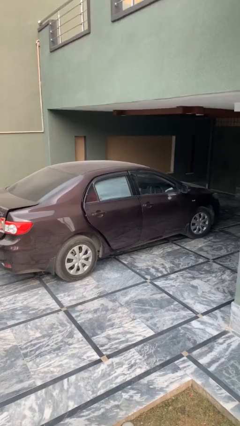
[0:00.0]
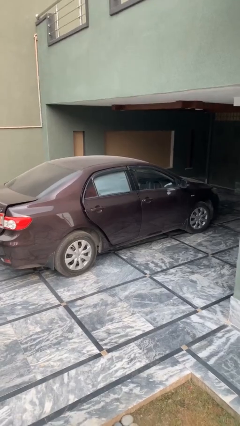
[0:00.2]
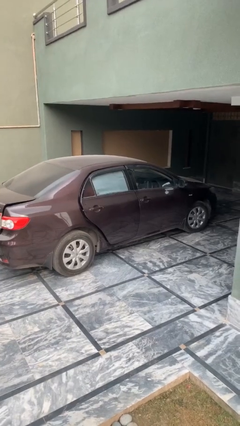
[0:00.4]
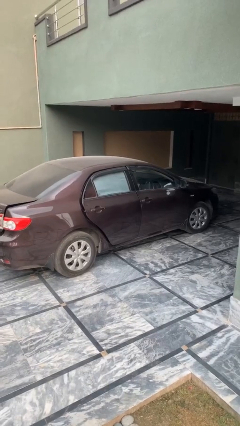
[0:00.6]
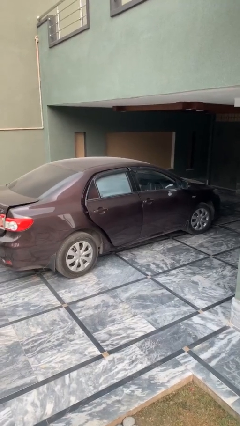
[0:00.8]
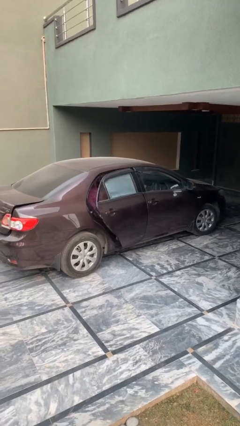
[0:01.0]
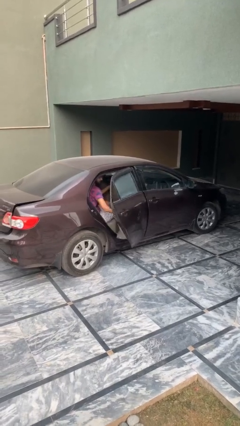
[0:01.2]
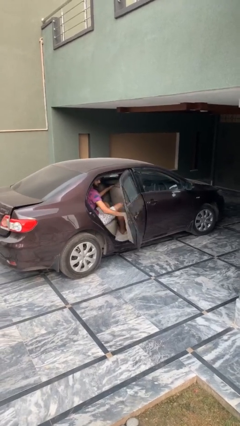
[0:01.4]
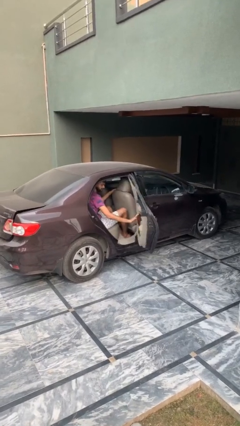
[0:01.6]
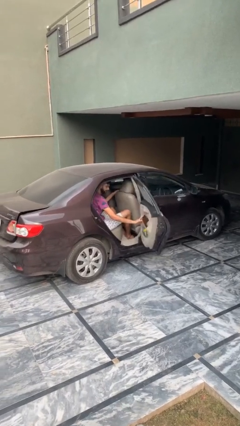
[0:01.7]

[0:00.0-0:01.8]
person opens car door

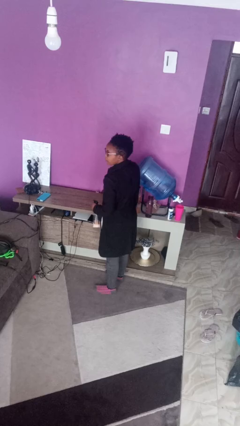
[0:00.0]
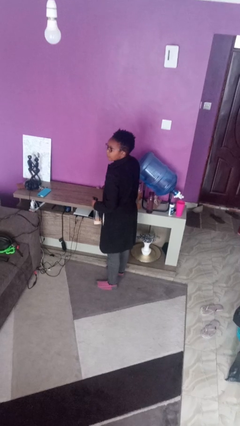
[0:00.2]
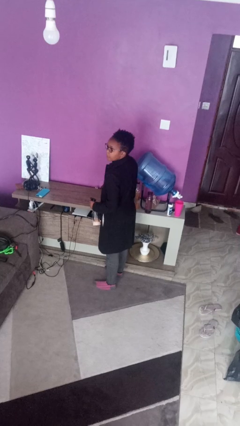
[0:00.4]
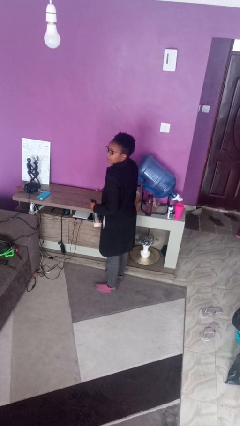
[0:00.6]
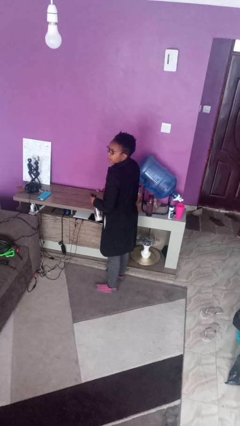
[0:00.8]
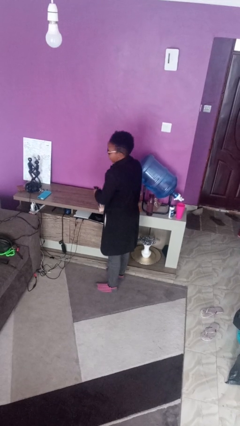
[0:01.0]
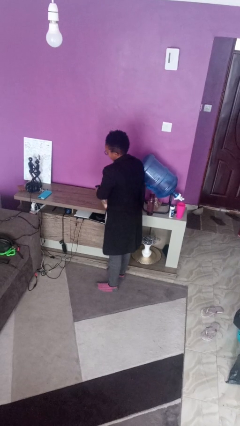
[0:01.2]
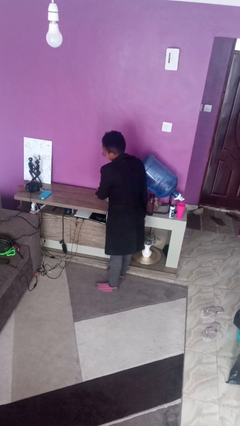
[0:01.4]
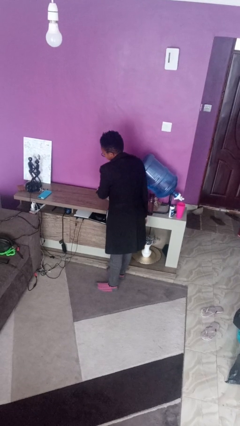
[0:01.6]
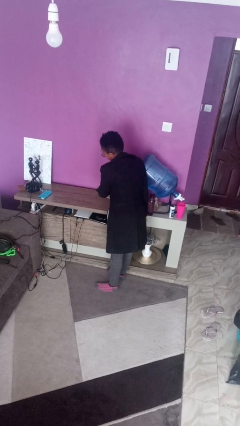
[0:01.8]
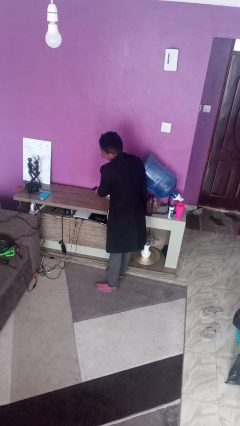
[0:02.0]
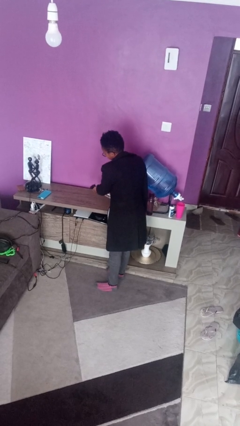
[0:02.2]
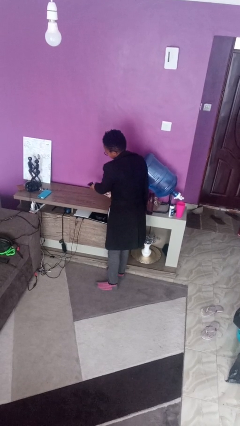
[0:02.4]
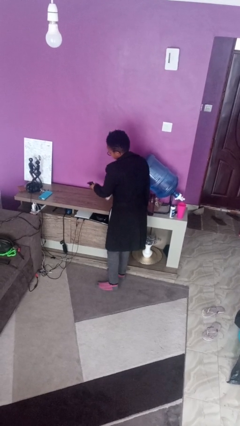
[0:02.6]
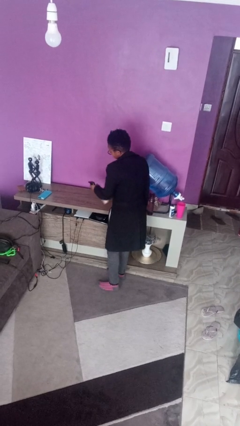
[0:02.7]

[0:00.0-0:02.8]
person sprays from bottle

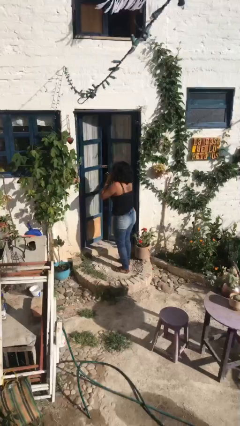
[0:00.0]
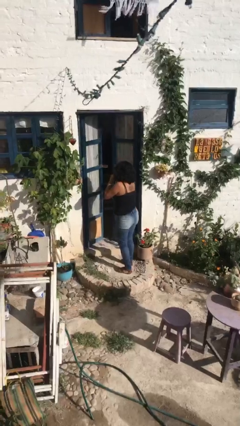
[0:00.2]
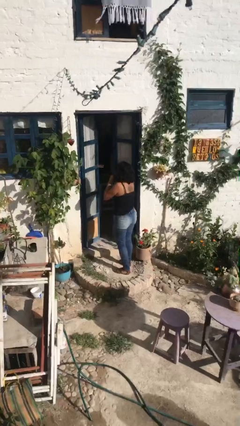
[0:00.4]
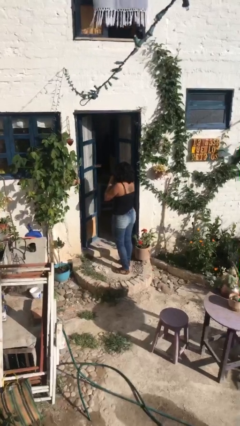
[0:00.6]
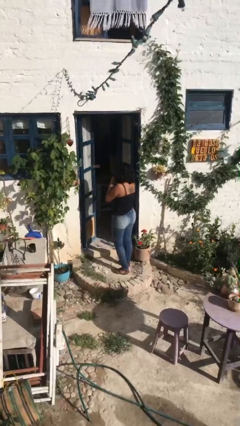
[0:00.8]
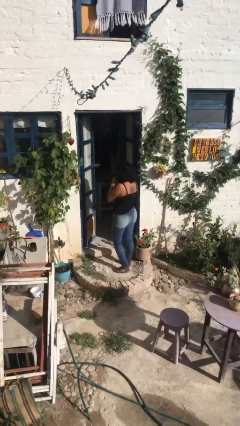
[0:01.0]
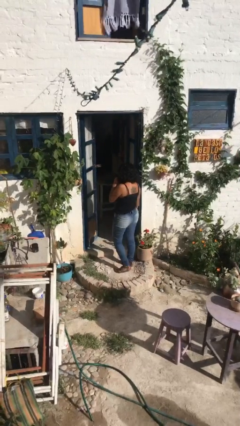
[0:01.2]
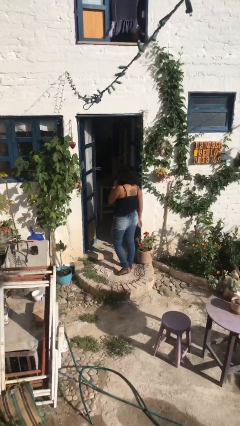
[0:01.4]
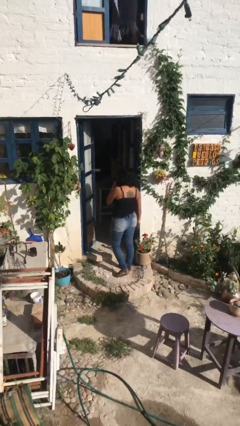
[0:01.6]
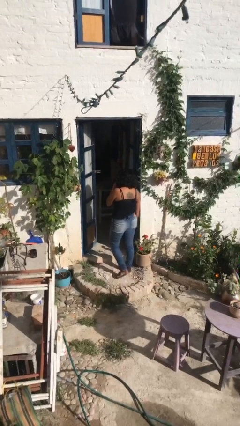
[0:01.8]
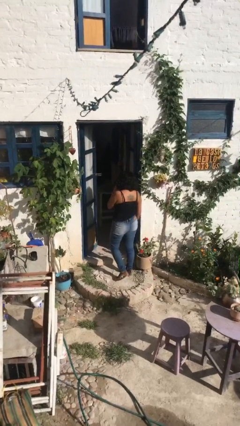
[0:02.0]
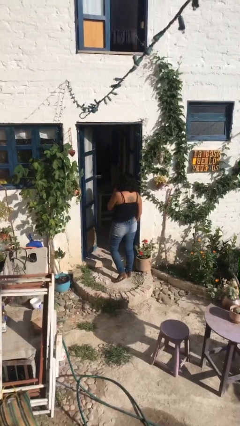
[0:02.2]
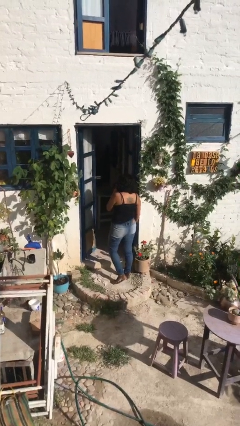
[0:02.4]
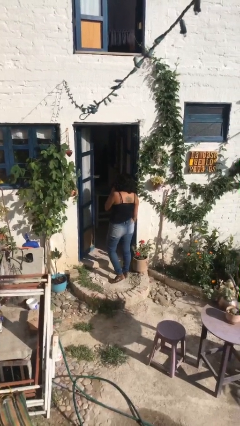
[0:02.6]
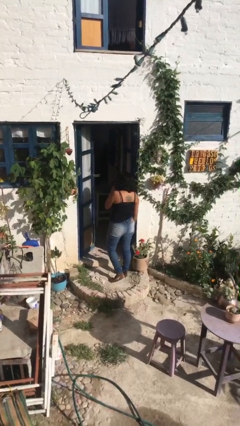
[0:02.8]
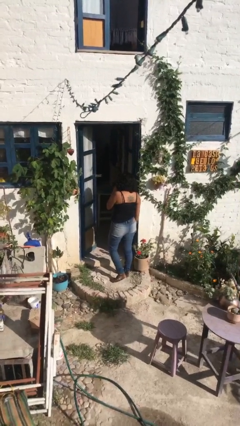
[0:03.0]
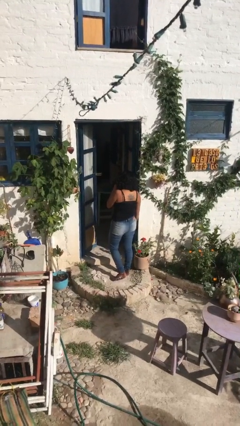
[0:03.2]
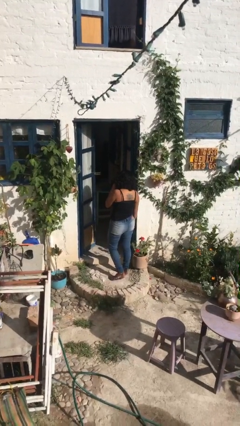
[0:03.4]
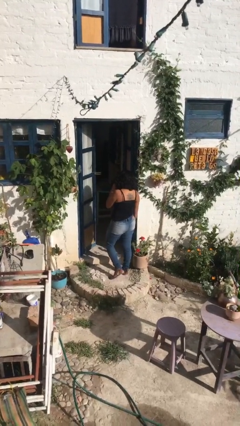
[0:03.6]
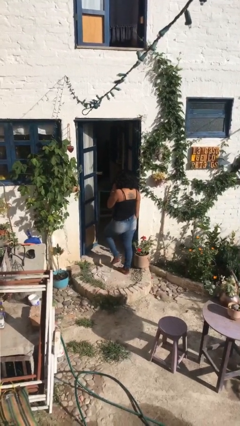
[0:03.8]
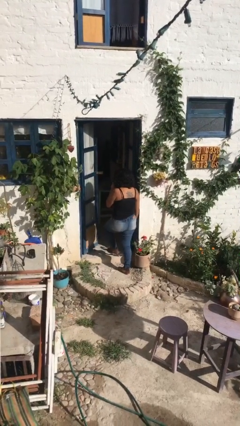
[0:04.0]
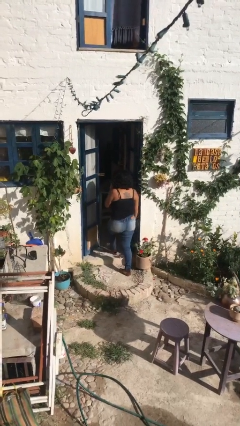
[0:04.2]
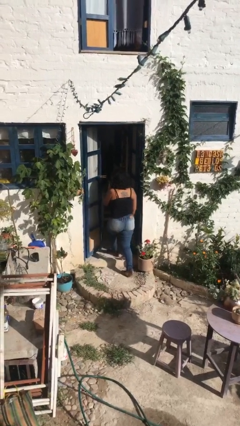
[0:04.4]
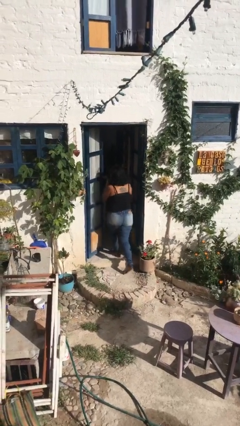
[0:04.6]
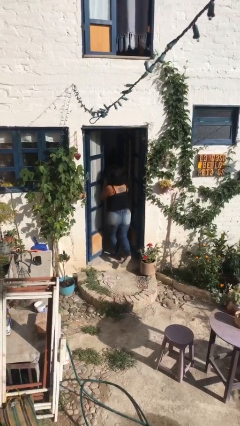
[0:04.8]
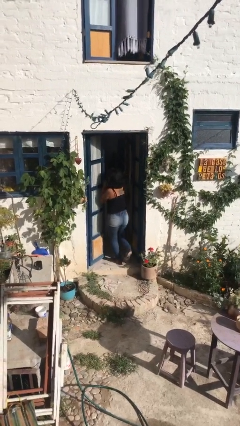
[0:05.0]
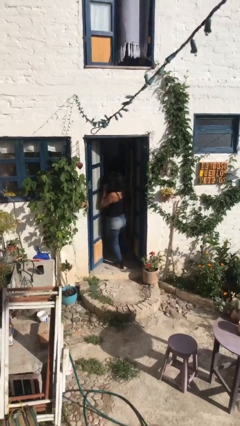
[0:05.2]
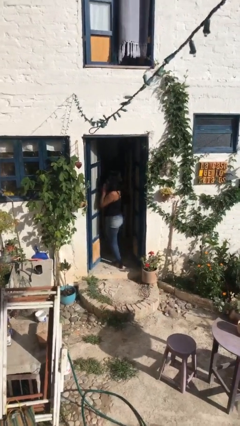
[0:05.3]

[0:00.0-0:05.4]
person exits scene through structure

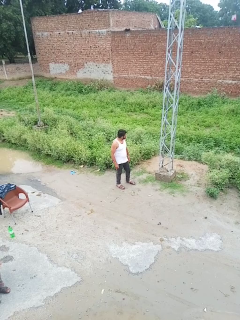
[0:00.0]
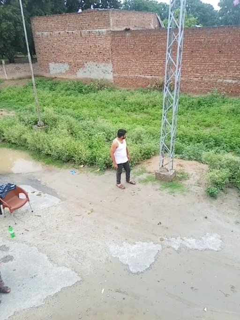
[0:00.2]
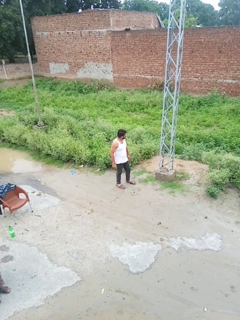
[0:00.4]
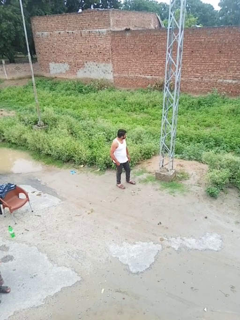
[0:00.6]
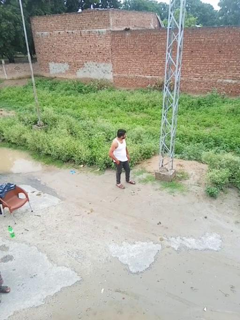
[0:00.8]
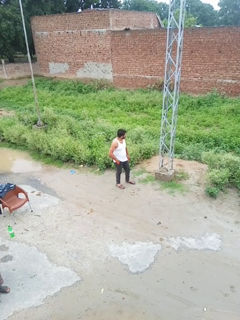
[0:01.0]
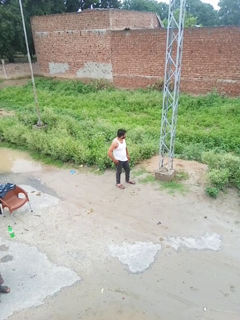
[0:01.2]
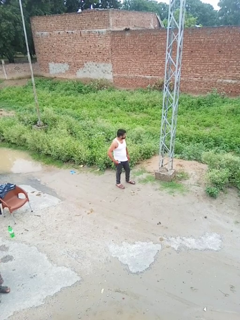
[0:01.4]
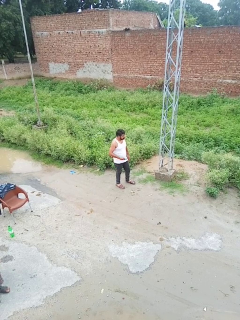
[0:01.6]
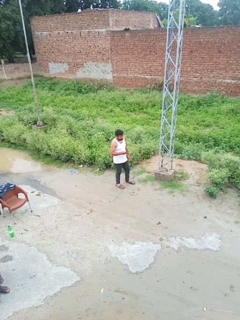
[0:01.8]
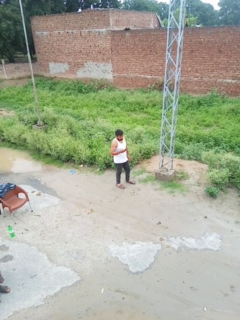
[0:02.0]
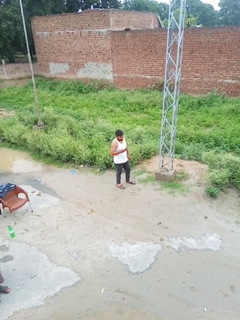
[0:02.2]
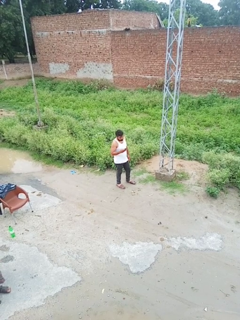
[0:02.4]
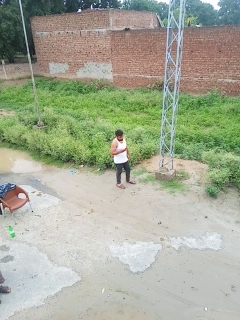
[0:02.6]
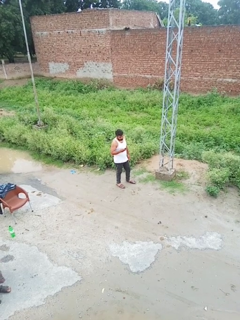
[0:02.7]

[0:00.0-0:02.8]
person takes phone from pocket

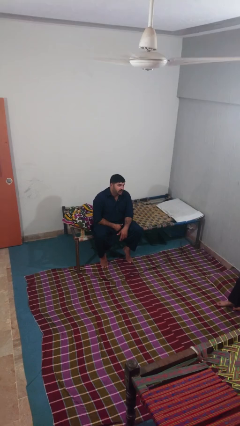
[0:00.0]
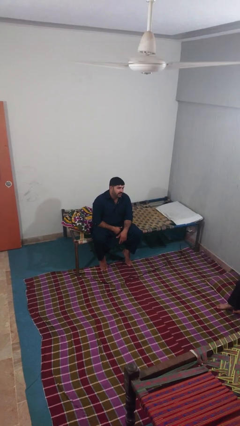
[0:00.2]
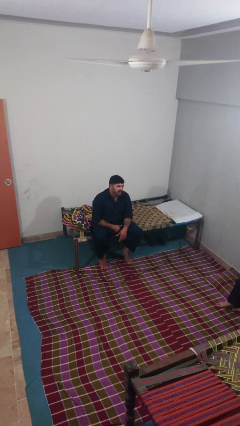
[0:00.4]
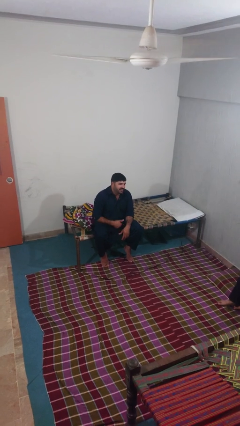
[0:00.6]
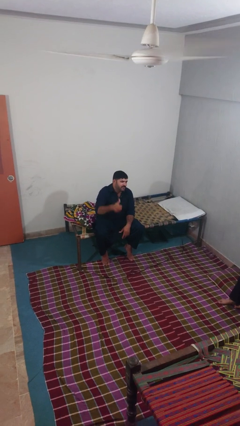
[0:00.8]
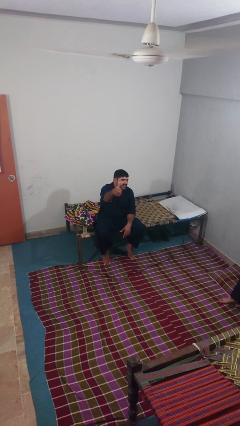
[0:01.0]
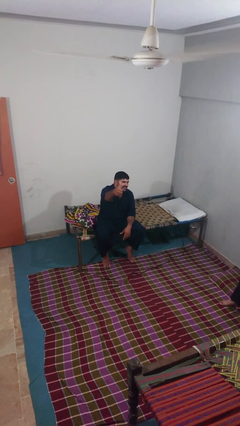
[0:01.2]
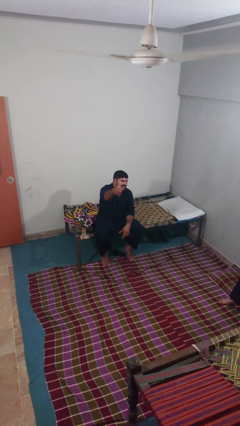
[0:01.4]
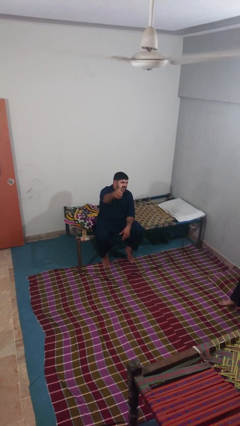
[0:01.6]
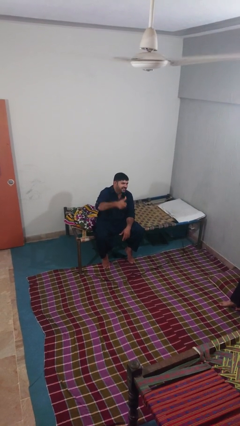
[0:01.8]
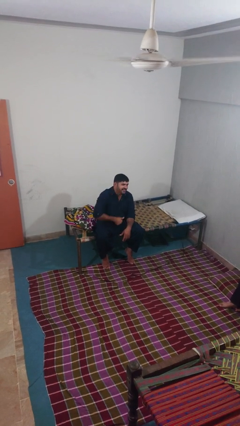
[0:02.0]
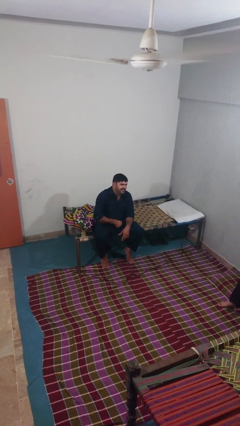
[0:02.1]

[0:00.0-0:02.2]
person gestures thumbs up

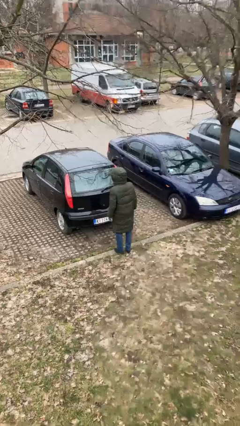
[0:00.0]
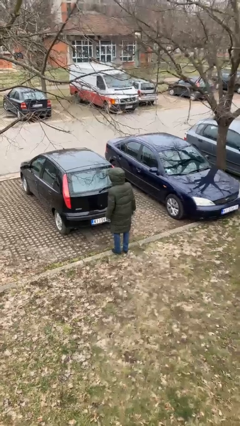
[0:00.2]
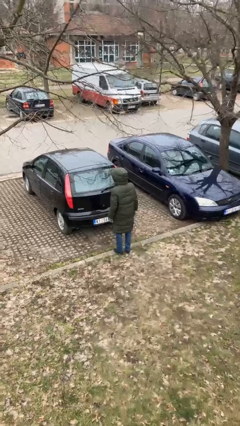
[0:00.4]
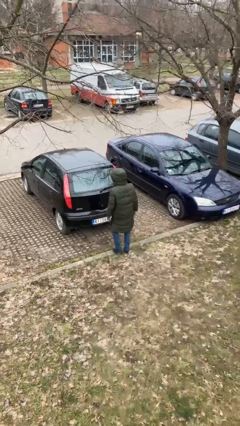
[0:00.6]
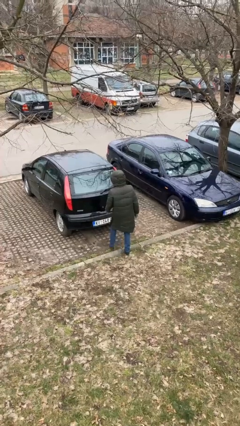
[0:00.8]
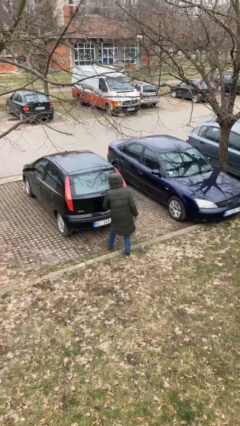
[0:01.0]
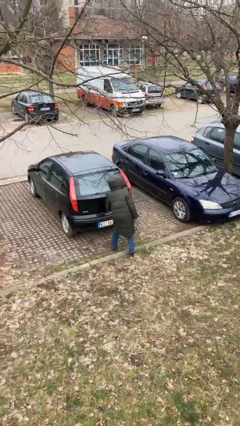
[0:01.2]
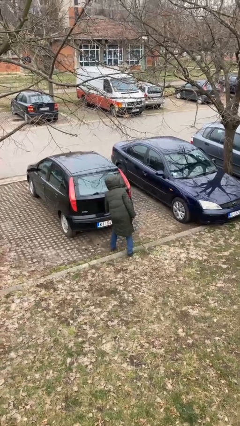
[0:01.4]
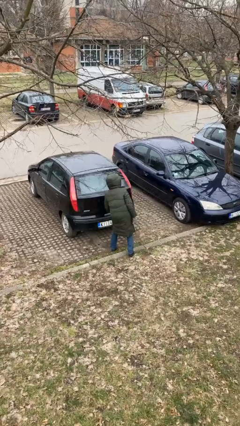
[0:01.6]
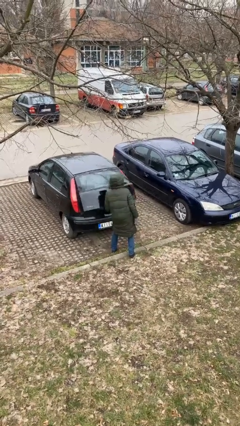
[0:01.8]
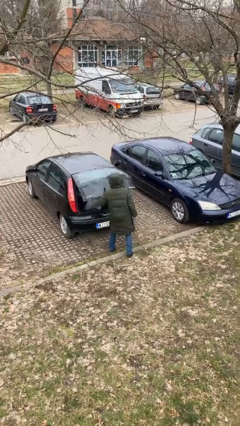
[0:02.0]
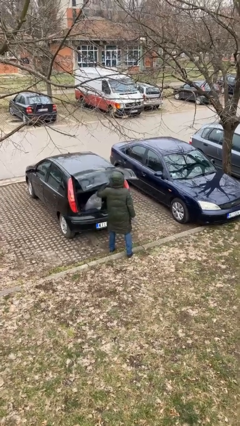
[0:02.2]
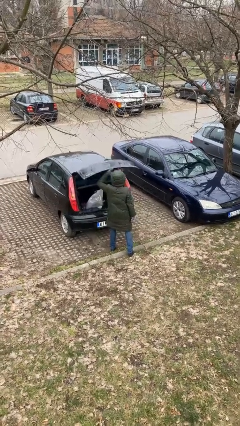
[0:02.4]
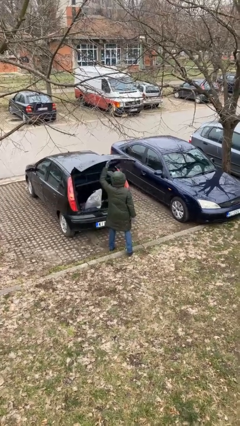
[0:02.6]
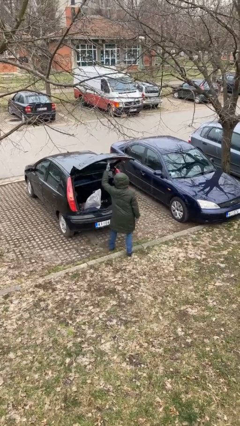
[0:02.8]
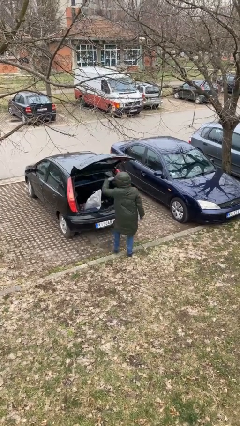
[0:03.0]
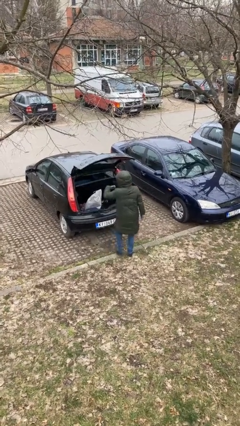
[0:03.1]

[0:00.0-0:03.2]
person opens car trunk
